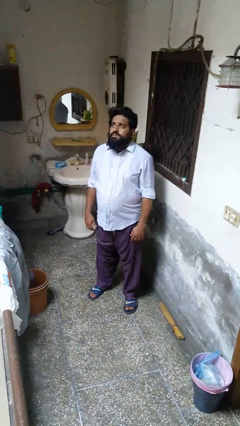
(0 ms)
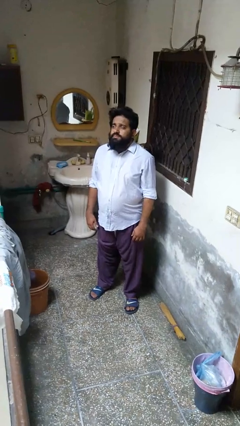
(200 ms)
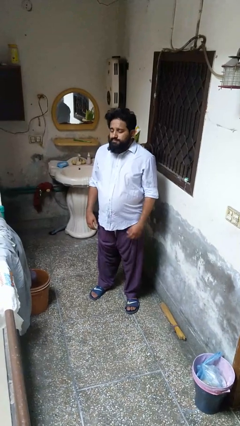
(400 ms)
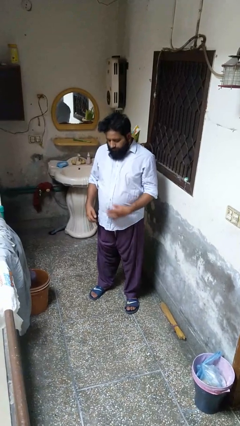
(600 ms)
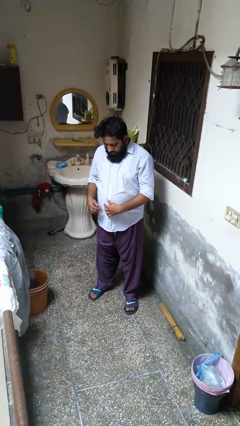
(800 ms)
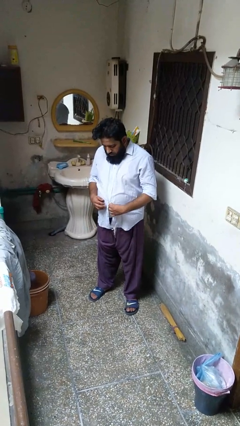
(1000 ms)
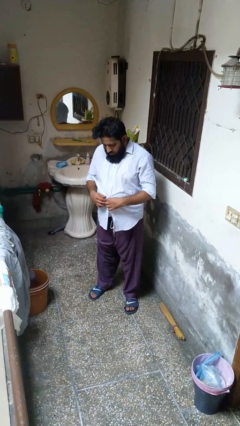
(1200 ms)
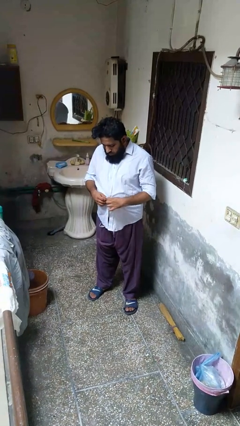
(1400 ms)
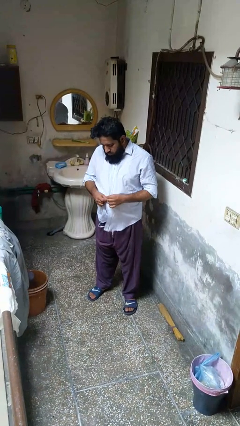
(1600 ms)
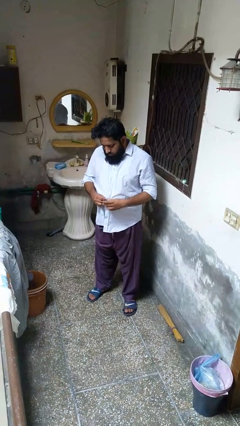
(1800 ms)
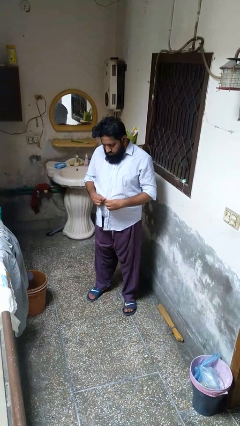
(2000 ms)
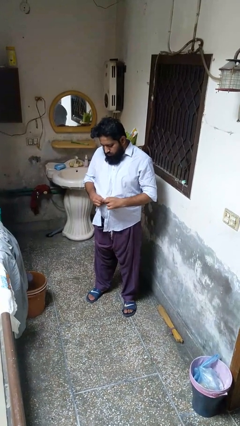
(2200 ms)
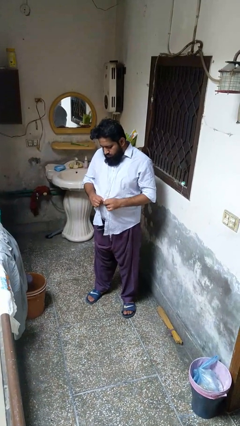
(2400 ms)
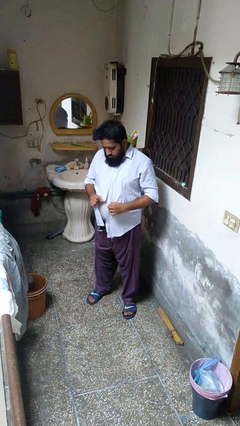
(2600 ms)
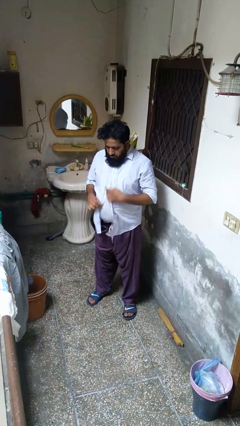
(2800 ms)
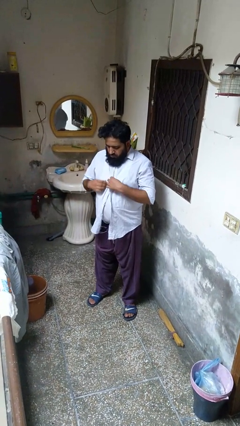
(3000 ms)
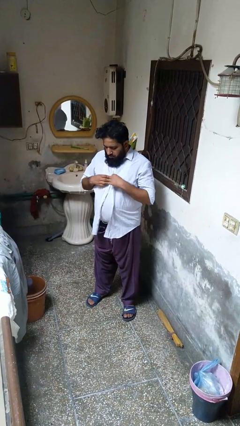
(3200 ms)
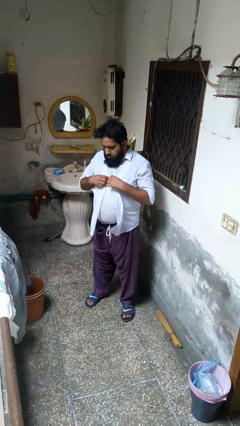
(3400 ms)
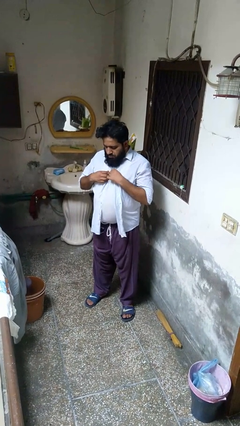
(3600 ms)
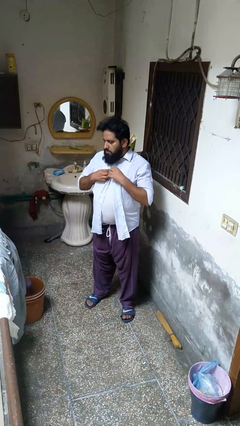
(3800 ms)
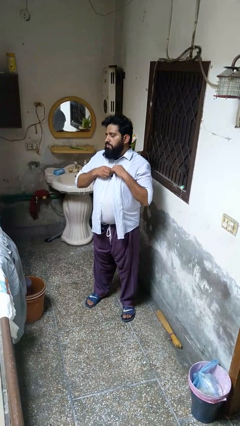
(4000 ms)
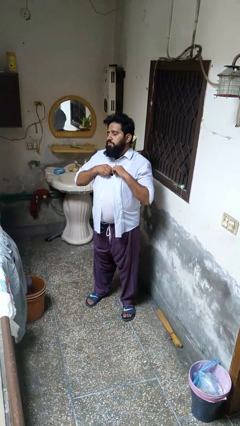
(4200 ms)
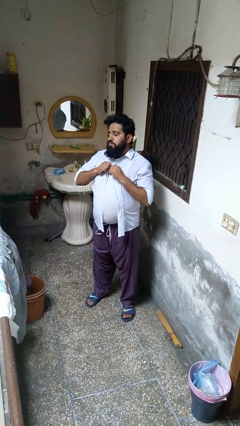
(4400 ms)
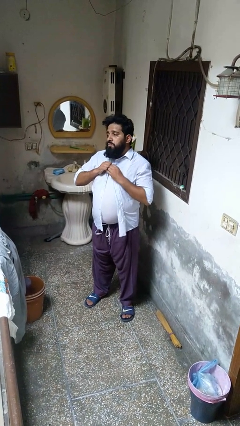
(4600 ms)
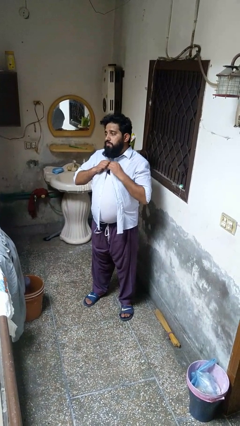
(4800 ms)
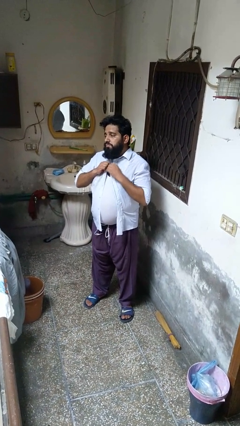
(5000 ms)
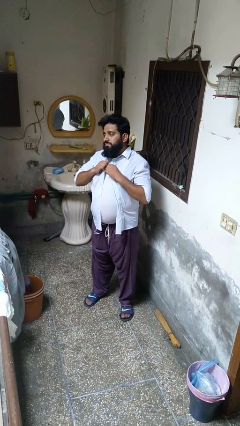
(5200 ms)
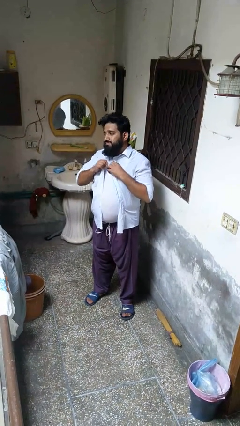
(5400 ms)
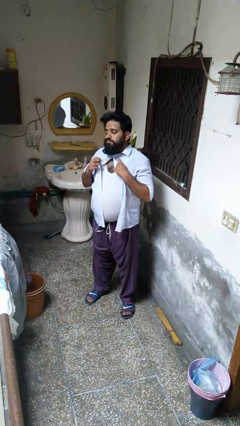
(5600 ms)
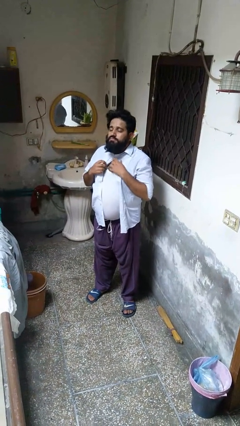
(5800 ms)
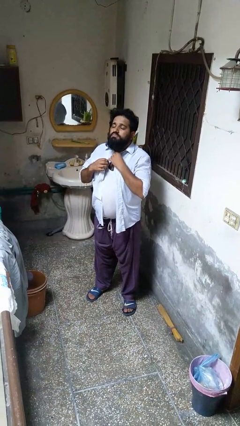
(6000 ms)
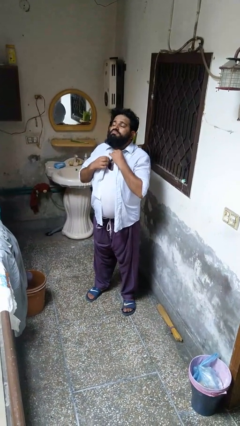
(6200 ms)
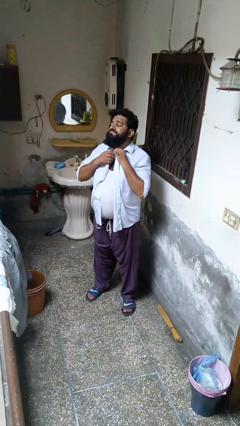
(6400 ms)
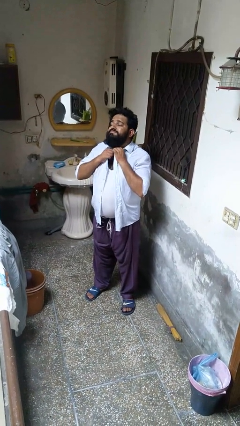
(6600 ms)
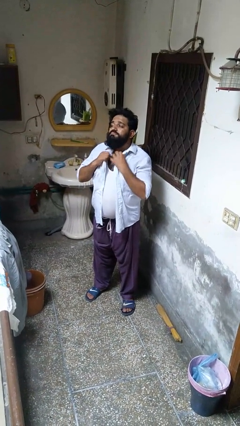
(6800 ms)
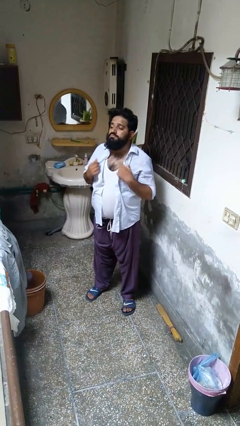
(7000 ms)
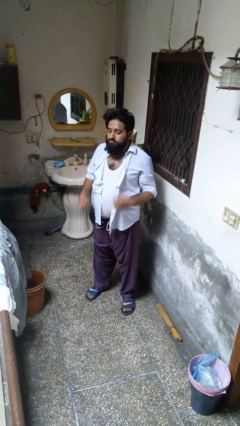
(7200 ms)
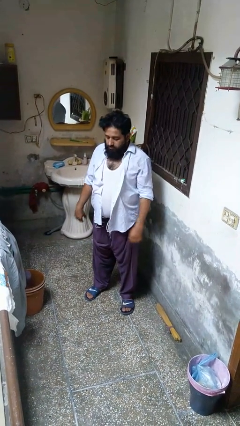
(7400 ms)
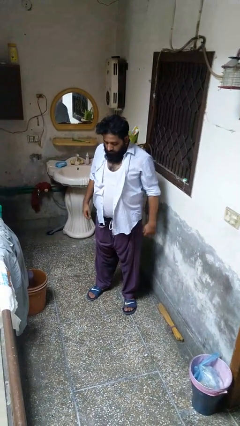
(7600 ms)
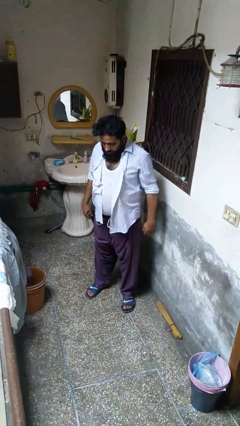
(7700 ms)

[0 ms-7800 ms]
person unbuttons shirt

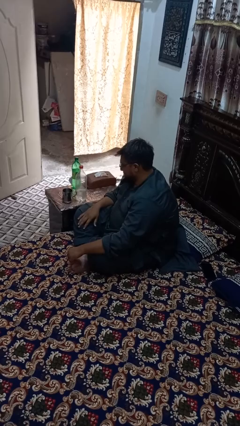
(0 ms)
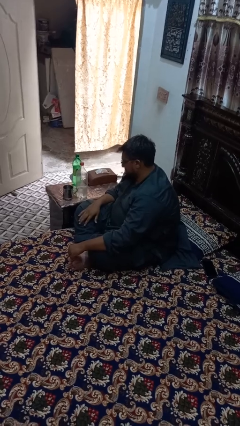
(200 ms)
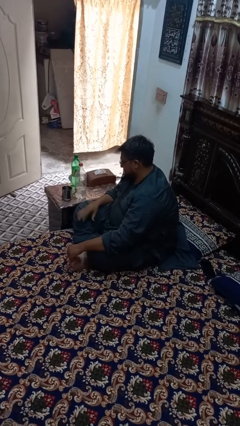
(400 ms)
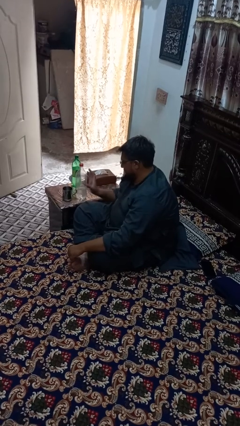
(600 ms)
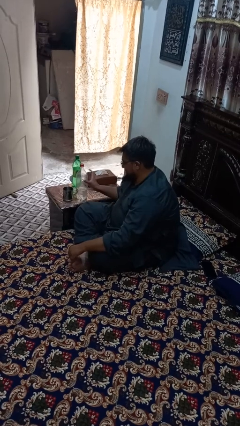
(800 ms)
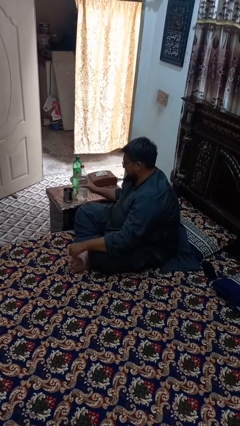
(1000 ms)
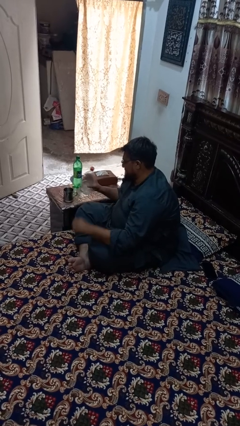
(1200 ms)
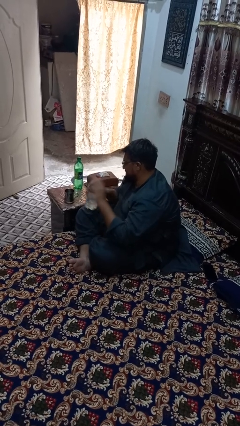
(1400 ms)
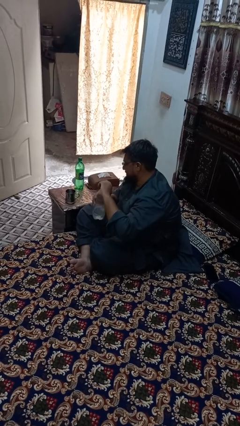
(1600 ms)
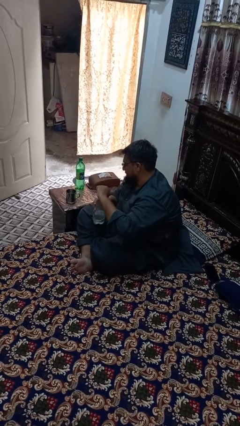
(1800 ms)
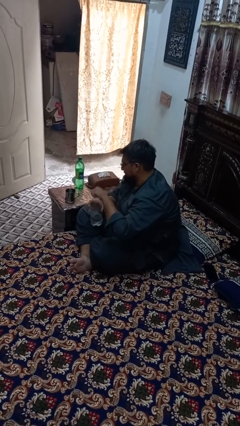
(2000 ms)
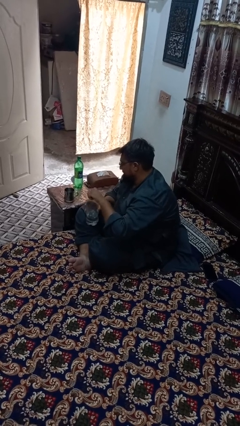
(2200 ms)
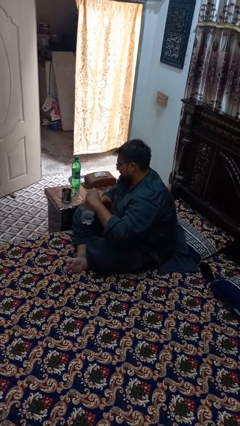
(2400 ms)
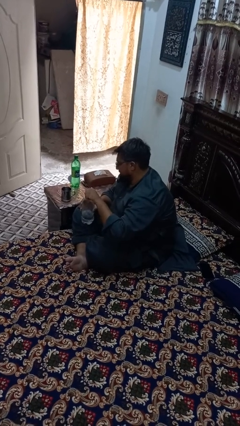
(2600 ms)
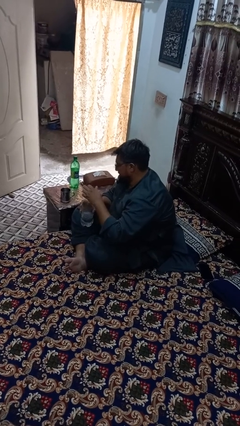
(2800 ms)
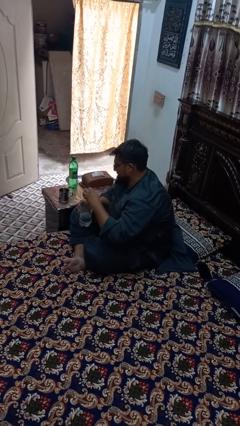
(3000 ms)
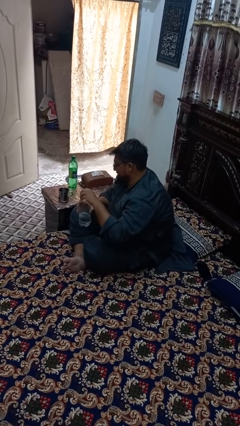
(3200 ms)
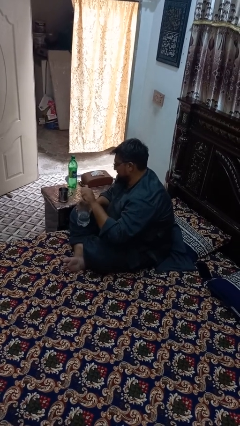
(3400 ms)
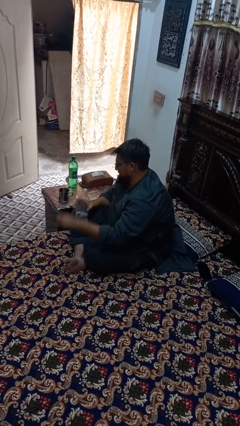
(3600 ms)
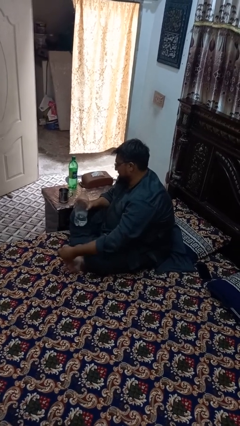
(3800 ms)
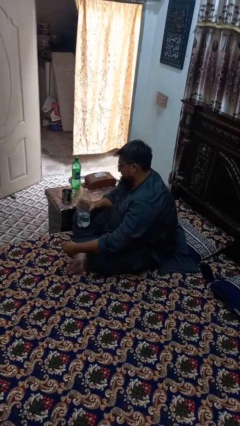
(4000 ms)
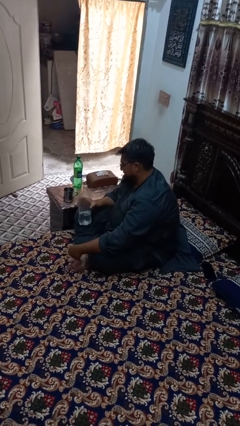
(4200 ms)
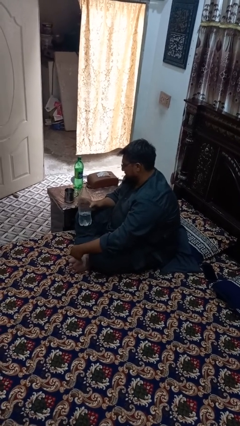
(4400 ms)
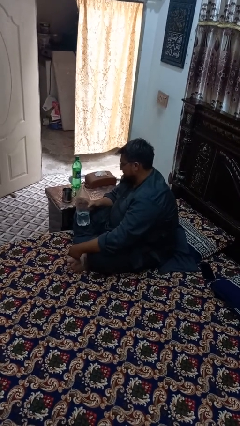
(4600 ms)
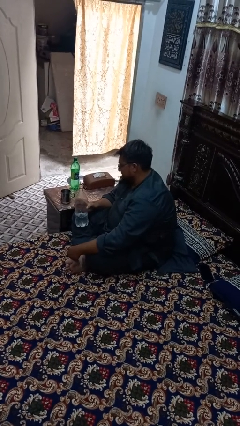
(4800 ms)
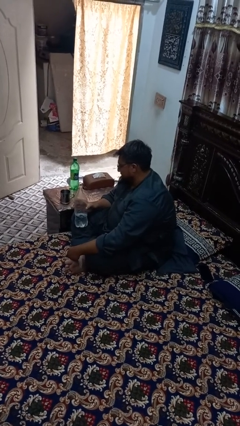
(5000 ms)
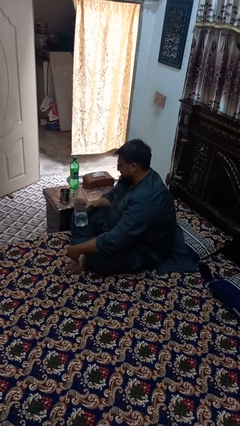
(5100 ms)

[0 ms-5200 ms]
person unscrews lid from bottle

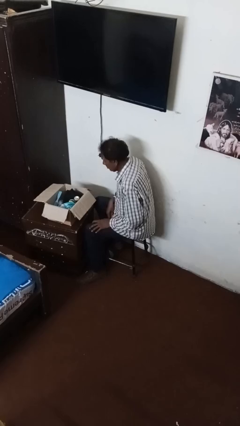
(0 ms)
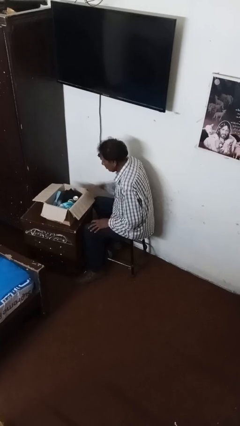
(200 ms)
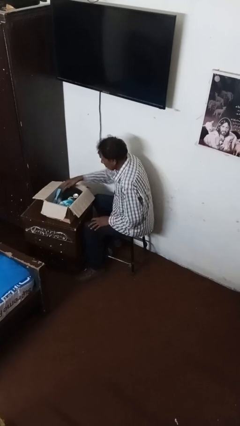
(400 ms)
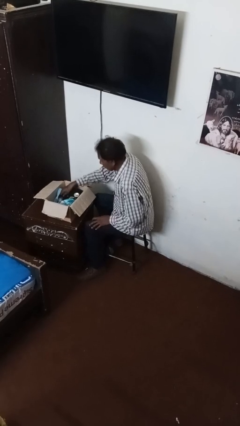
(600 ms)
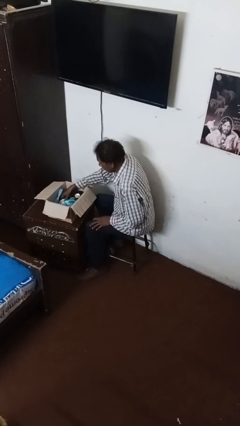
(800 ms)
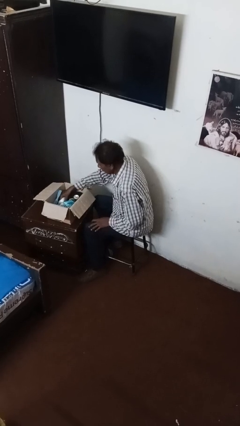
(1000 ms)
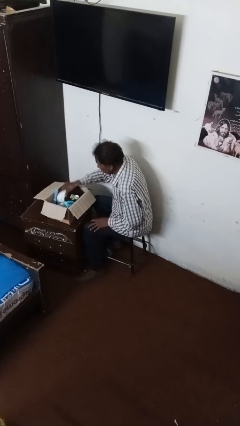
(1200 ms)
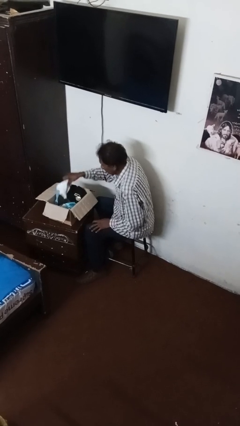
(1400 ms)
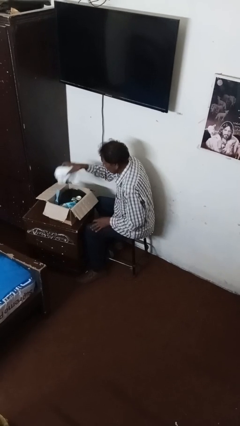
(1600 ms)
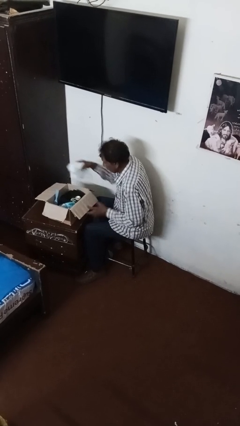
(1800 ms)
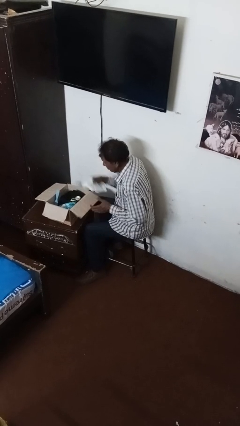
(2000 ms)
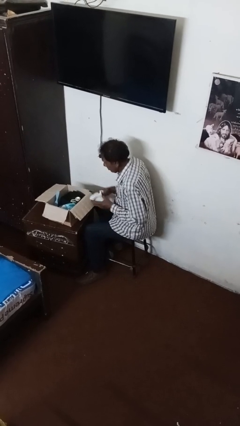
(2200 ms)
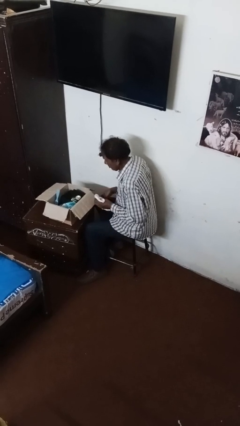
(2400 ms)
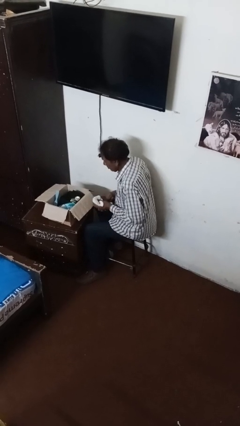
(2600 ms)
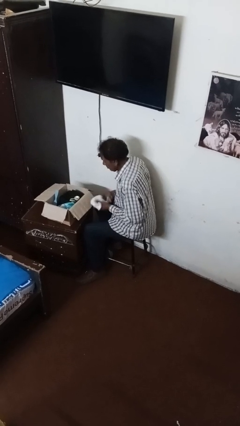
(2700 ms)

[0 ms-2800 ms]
person searches in box

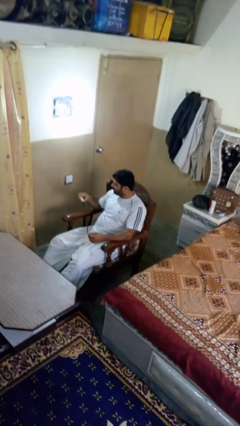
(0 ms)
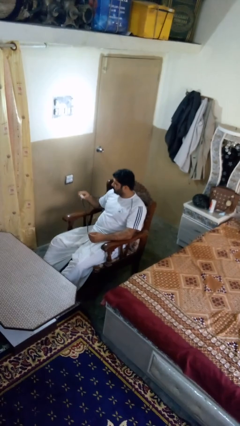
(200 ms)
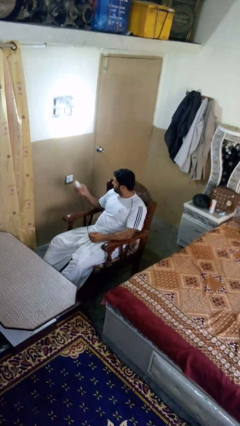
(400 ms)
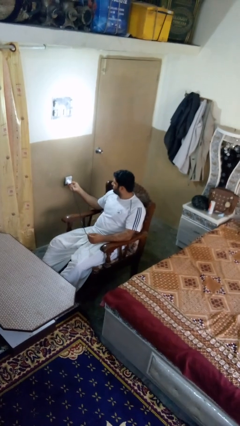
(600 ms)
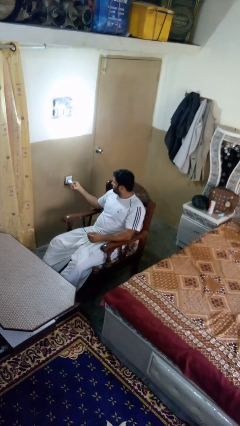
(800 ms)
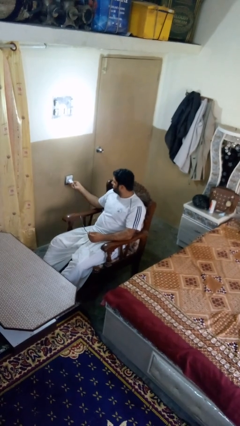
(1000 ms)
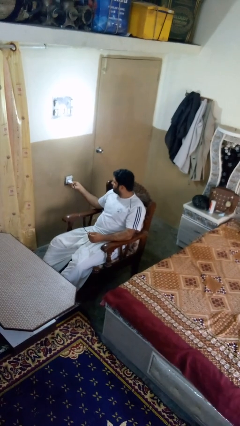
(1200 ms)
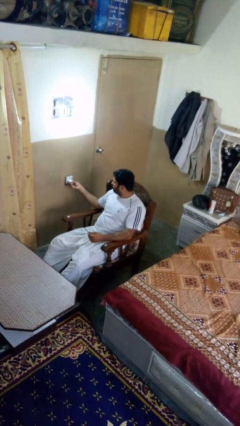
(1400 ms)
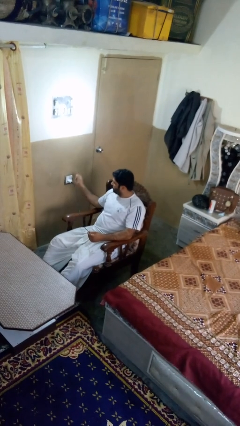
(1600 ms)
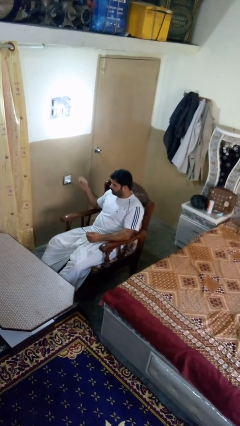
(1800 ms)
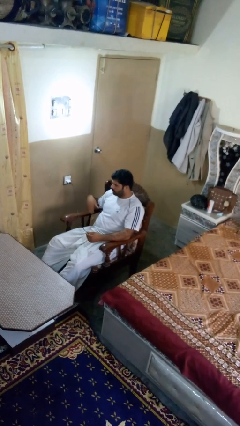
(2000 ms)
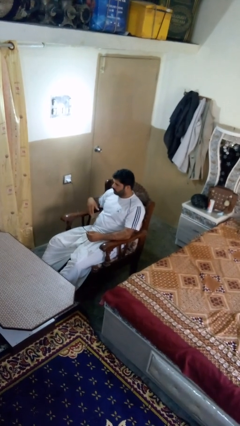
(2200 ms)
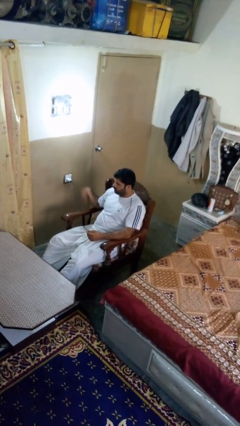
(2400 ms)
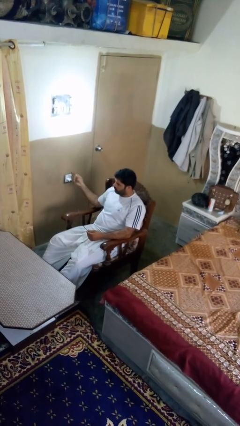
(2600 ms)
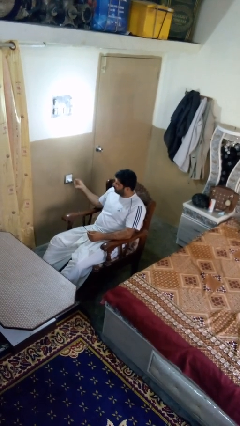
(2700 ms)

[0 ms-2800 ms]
person plugs into electrical socket
